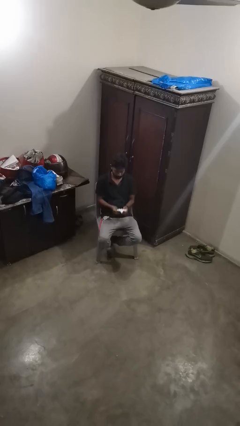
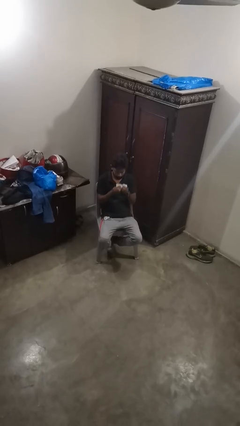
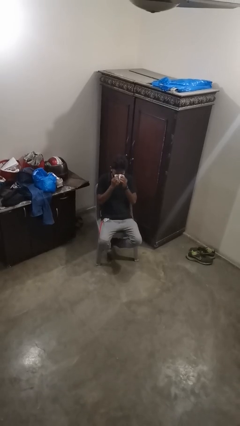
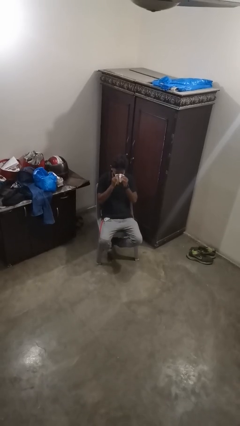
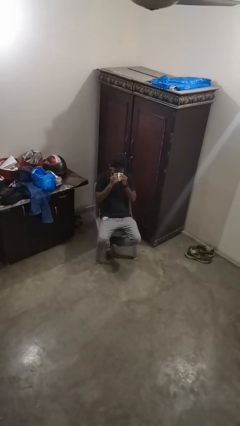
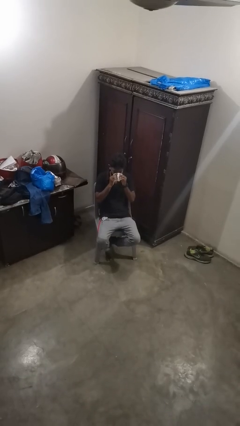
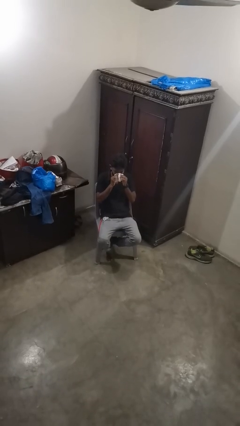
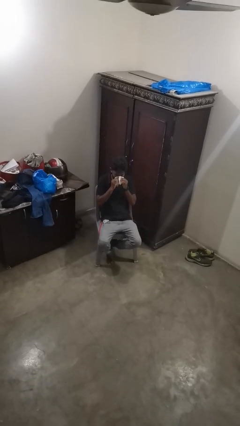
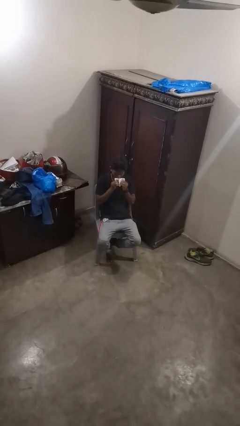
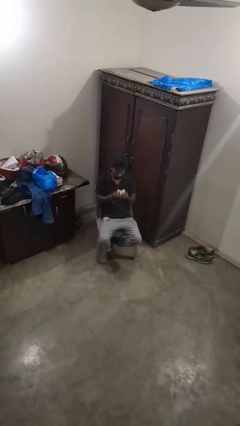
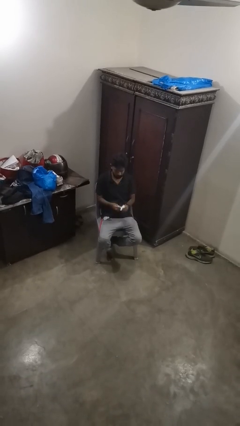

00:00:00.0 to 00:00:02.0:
person blows nose

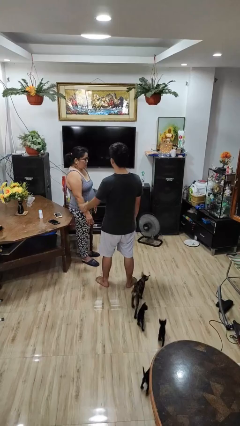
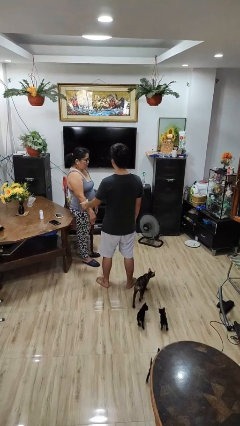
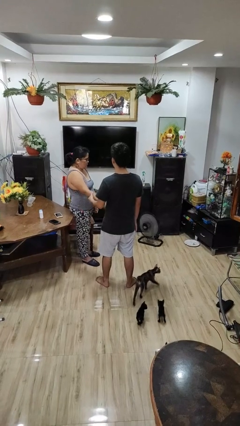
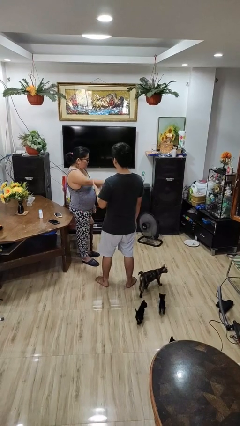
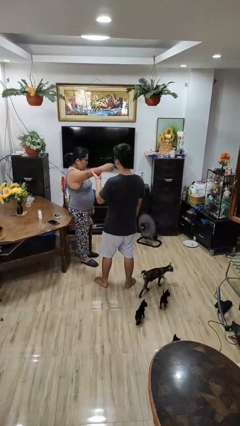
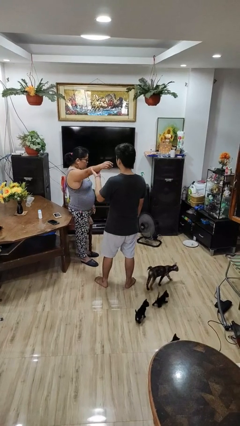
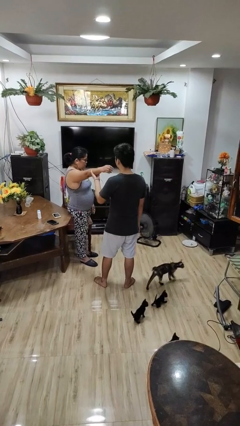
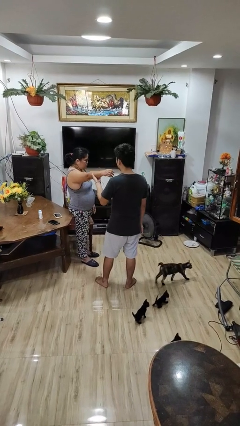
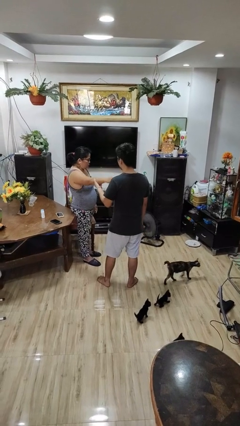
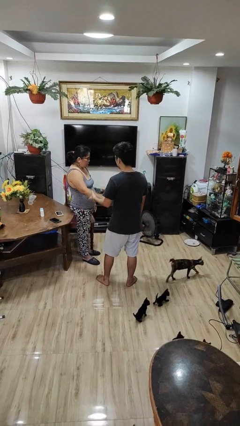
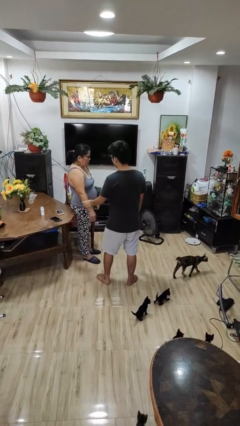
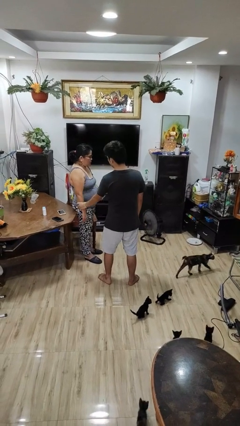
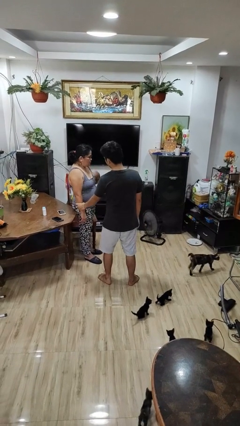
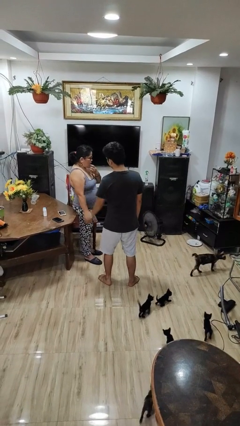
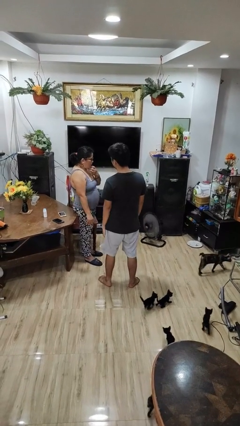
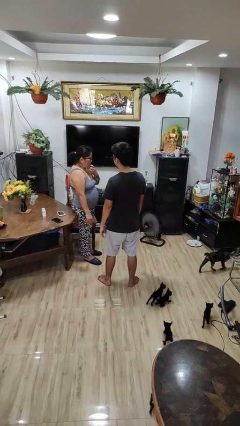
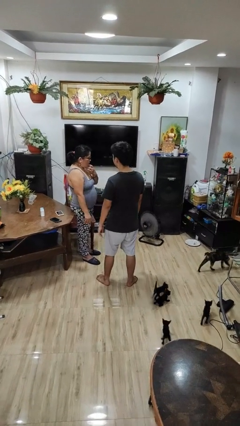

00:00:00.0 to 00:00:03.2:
person grabs person by forearm

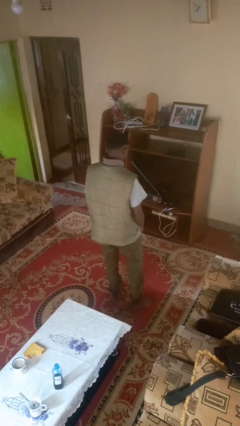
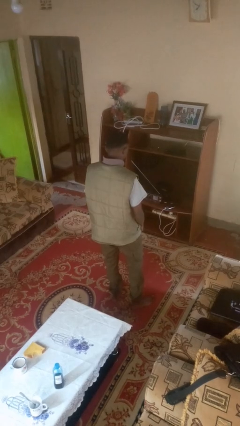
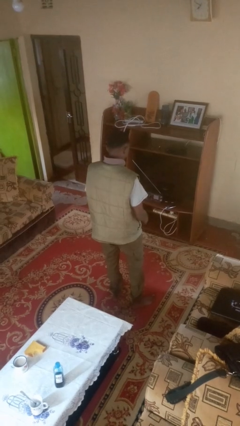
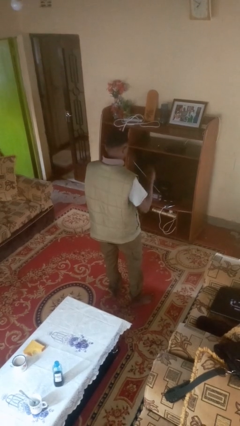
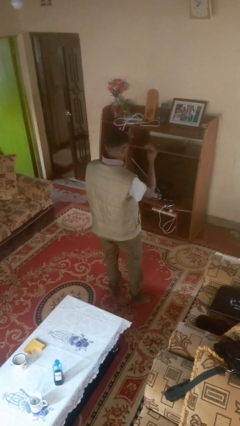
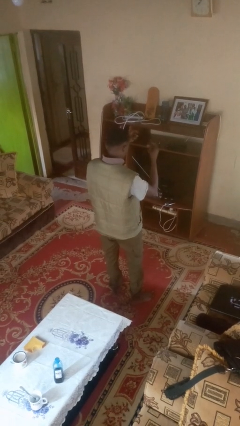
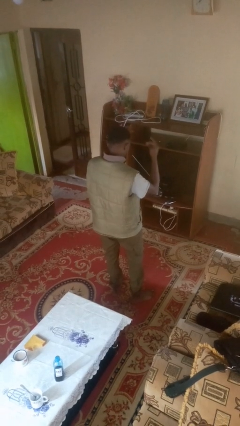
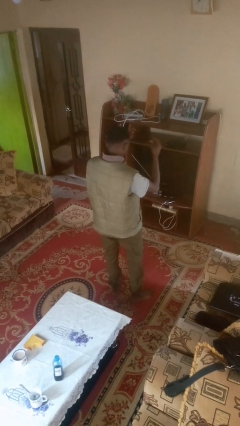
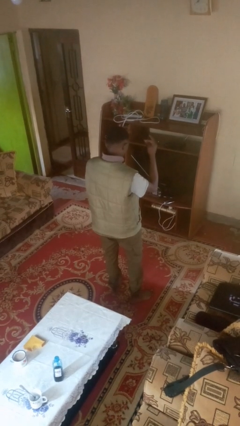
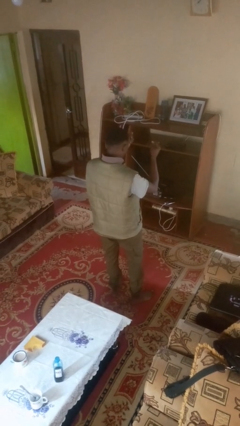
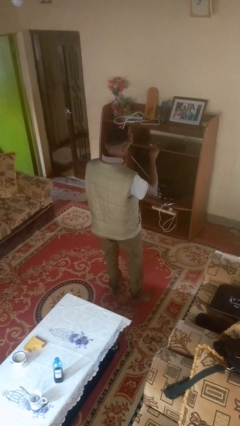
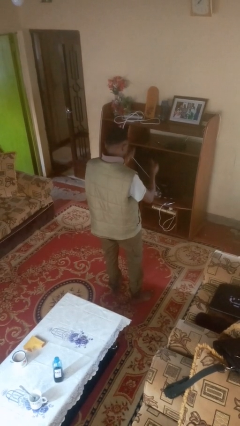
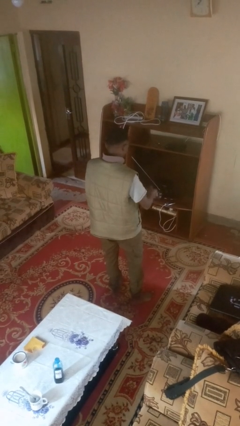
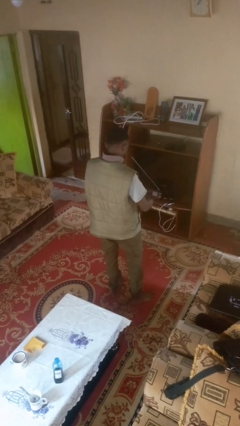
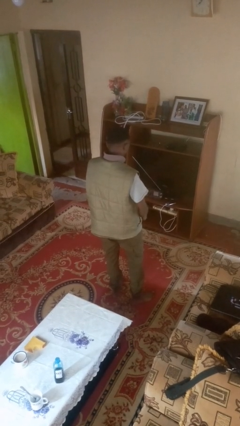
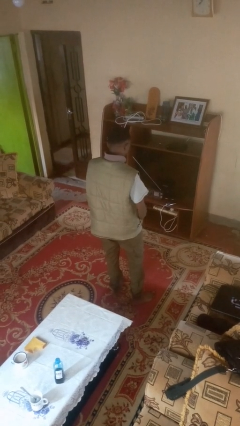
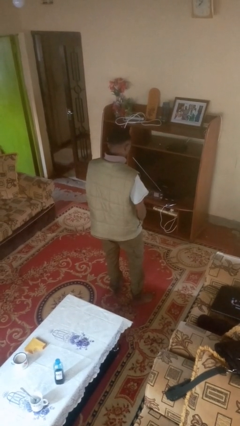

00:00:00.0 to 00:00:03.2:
person snaps fingers

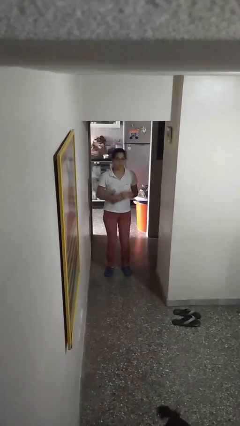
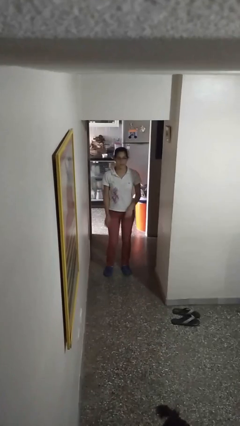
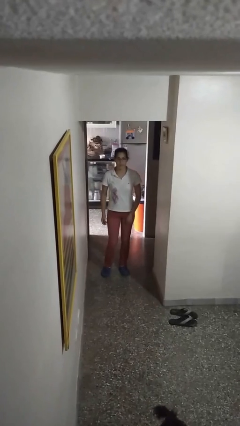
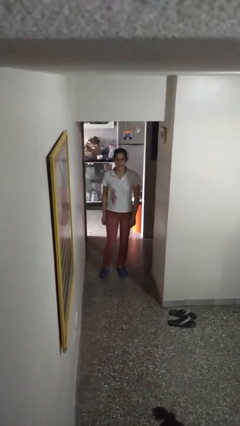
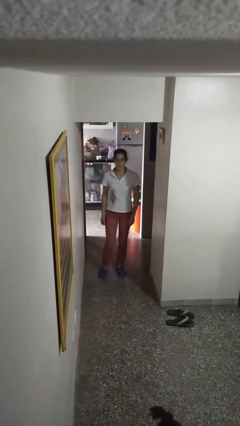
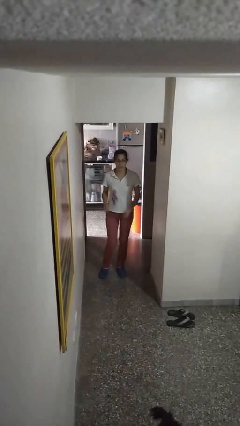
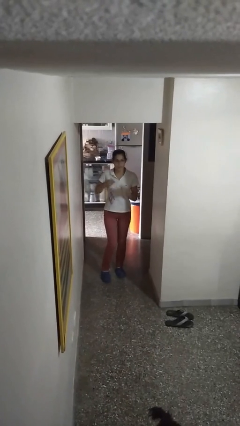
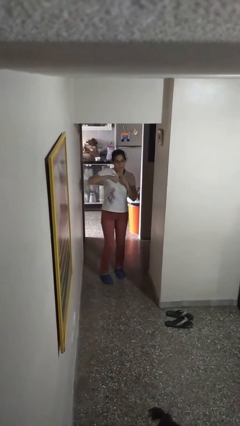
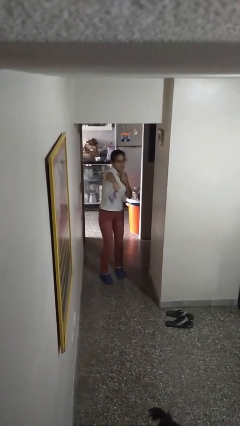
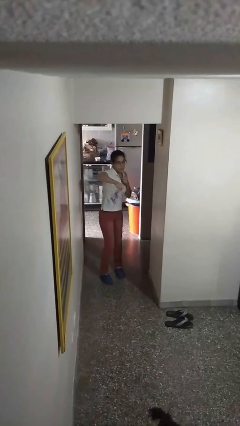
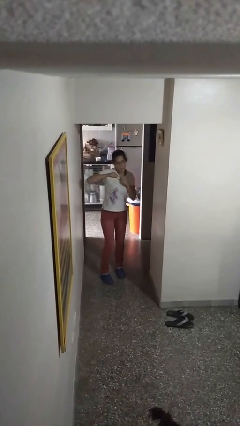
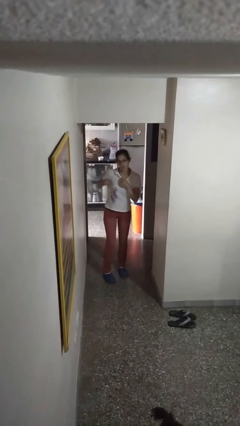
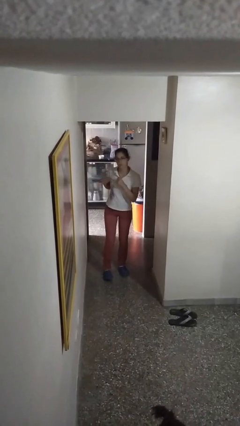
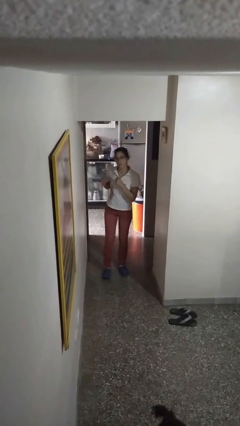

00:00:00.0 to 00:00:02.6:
person karate chop

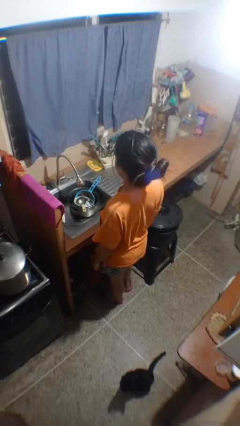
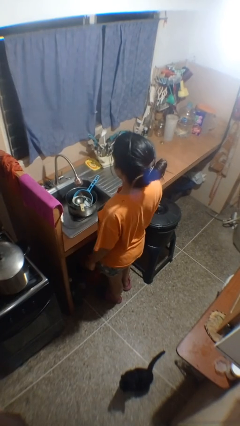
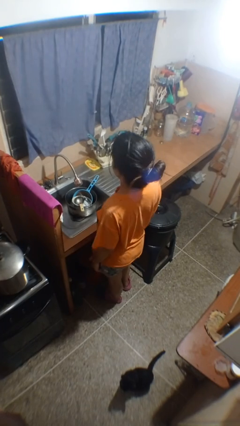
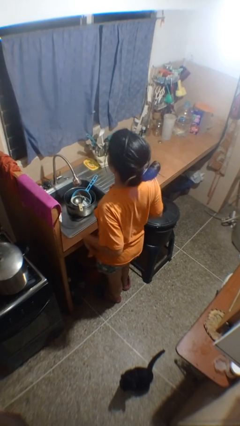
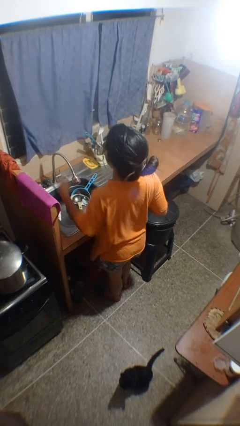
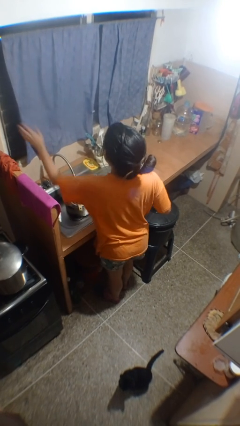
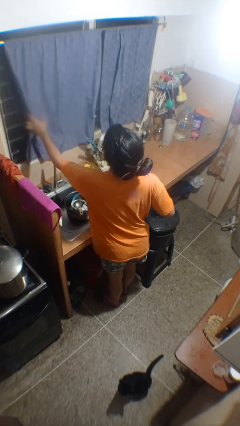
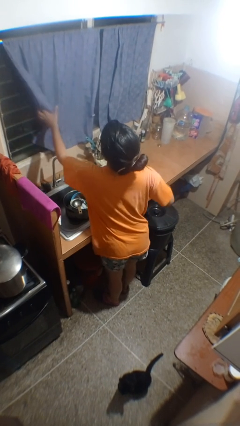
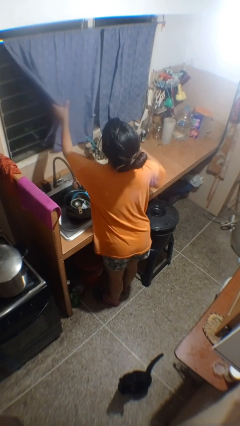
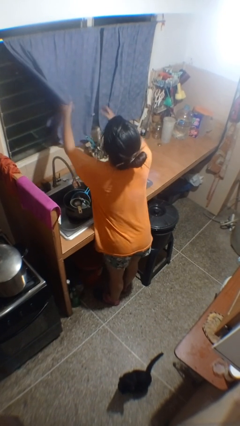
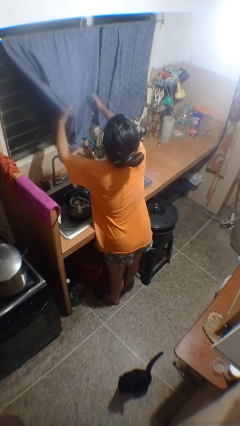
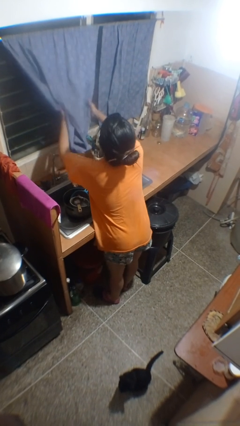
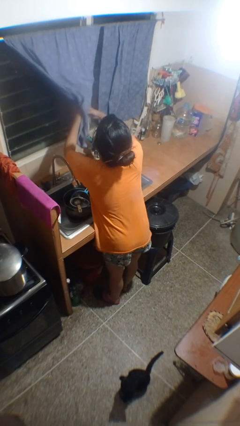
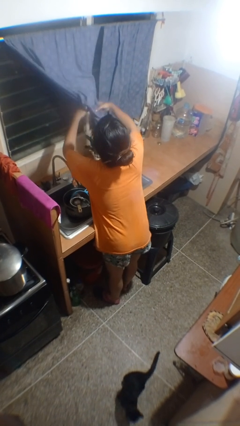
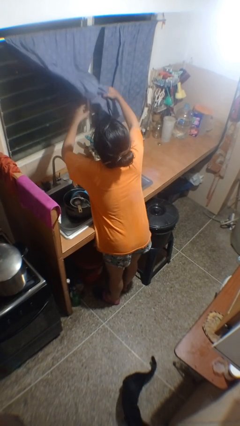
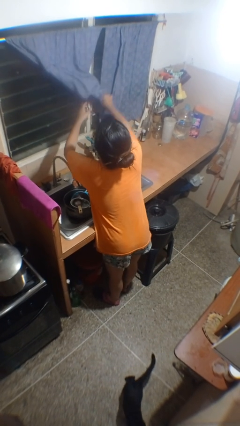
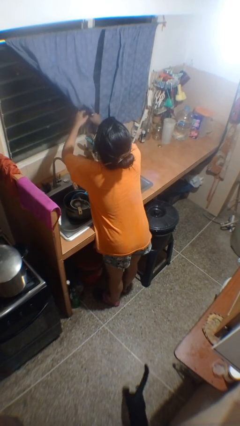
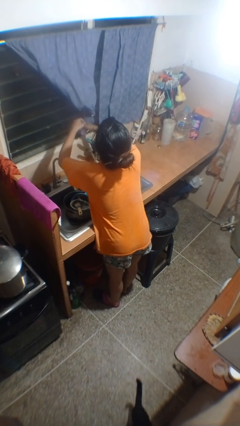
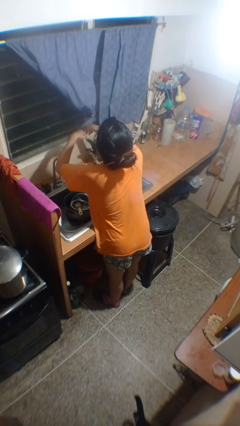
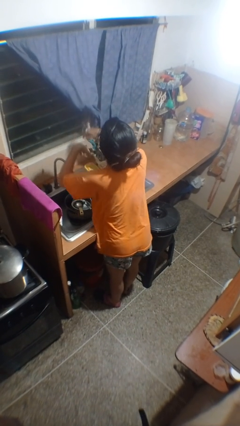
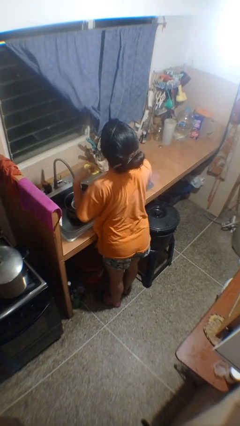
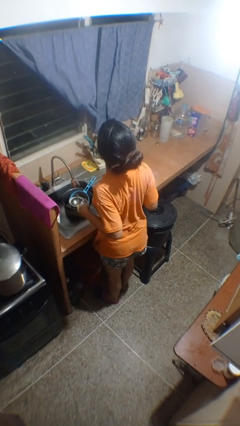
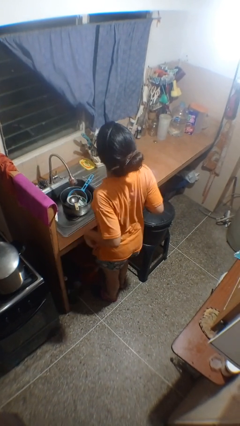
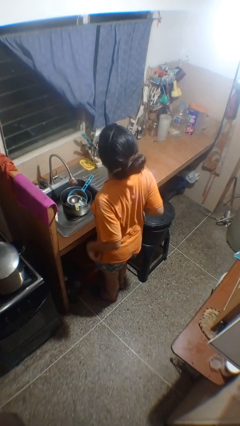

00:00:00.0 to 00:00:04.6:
person opens curtains

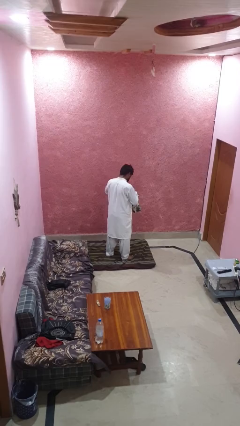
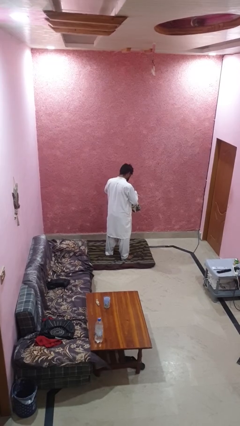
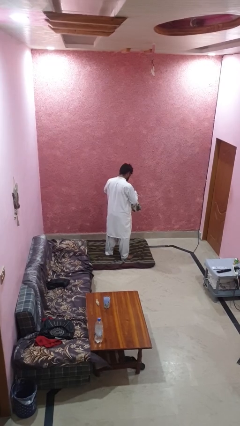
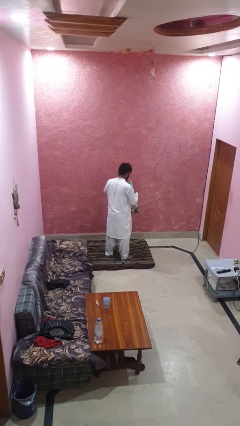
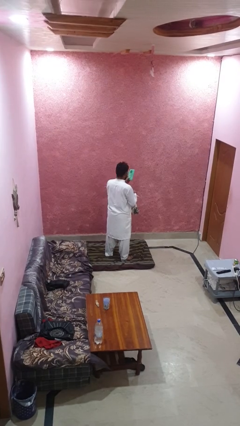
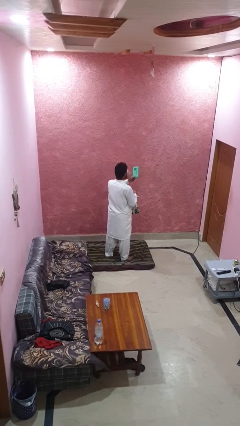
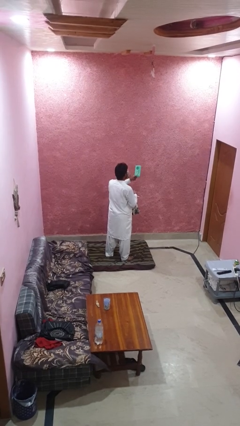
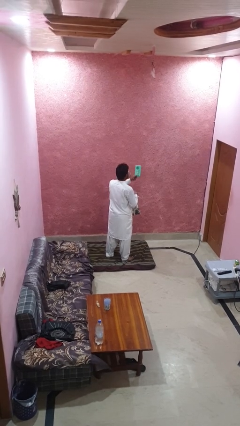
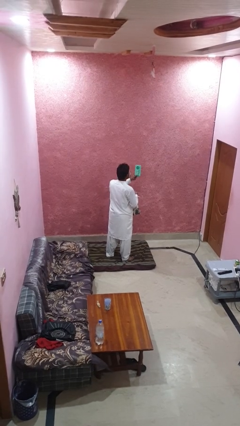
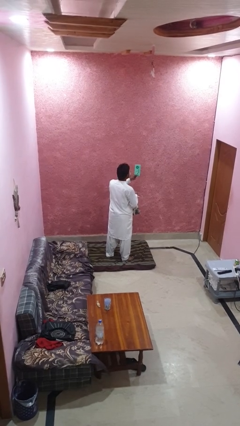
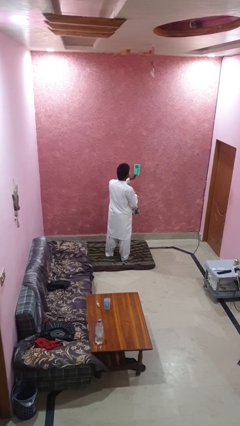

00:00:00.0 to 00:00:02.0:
person takes object from backpack
